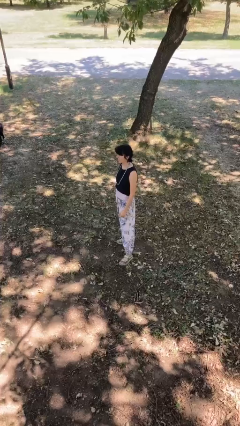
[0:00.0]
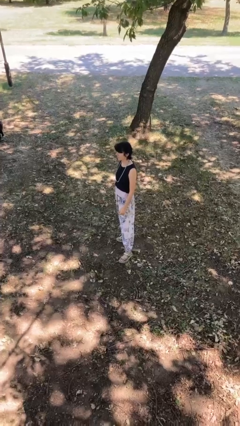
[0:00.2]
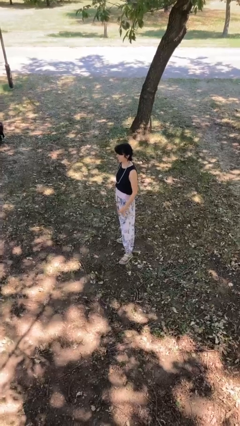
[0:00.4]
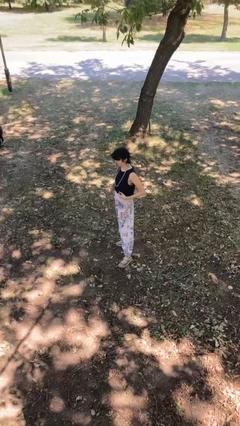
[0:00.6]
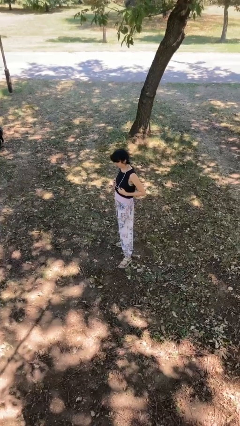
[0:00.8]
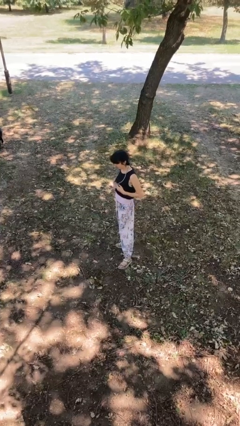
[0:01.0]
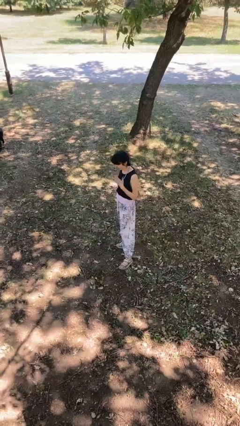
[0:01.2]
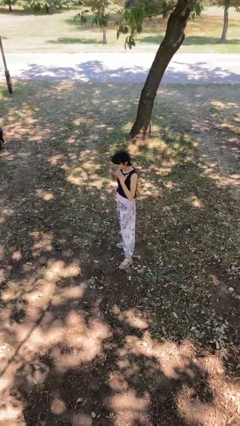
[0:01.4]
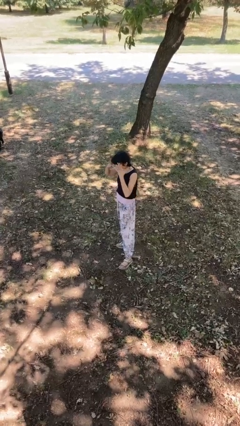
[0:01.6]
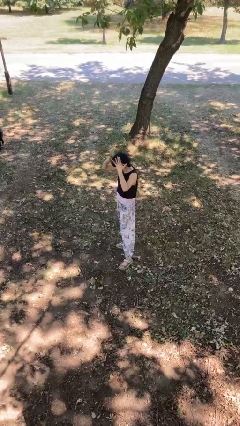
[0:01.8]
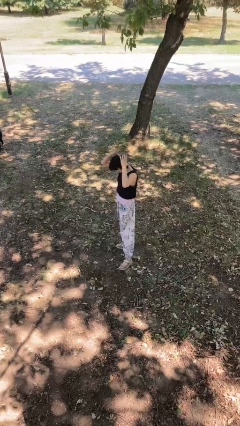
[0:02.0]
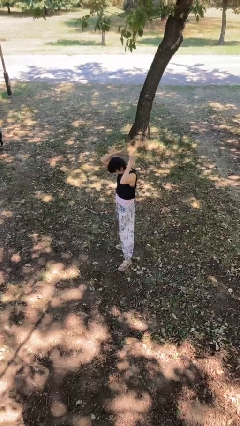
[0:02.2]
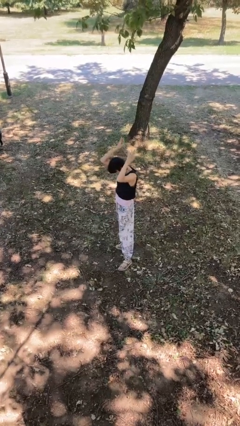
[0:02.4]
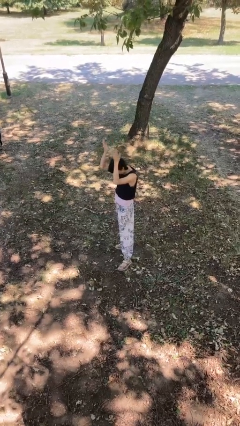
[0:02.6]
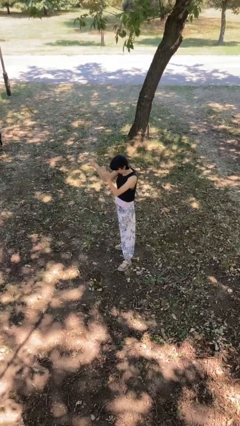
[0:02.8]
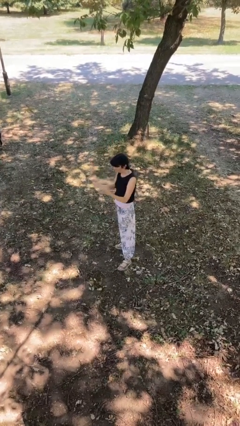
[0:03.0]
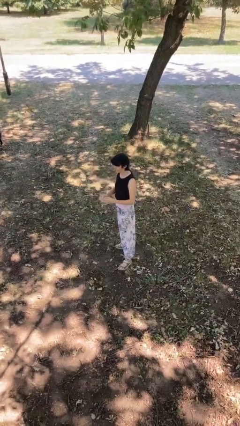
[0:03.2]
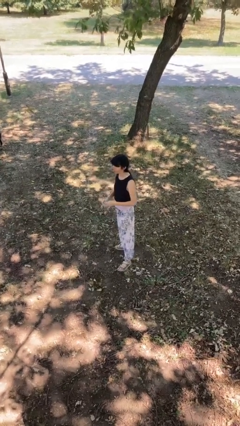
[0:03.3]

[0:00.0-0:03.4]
person takes off necklace

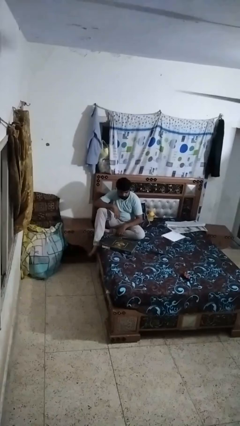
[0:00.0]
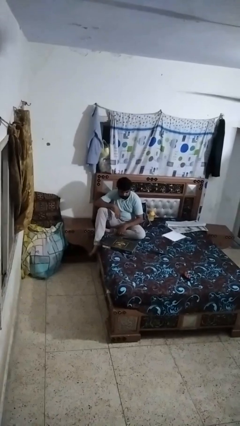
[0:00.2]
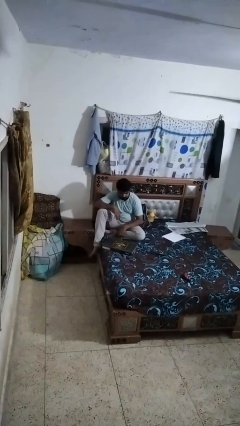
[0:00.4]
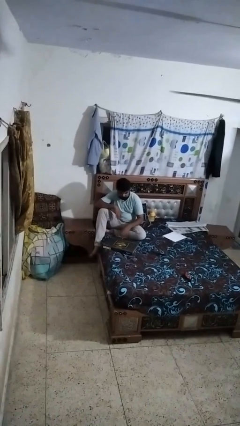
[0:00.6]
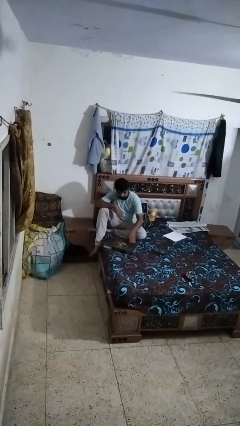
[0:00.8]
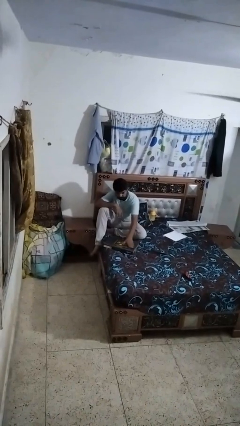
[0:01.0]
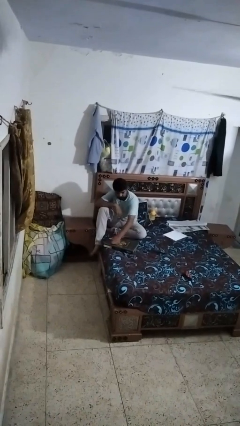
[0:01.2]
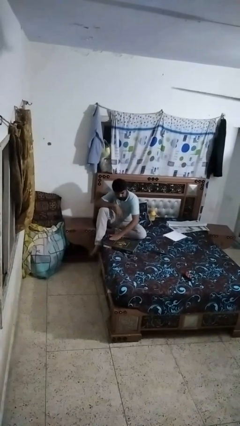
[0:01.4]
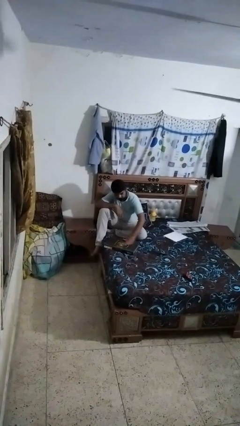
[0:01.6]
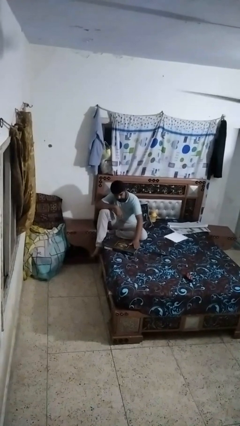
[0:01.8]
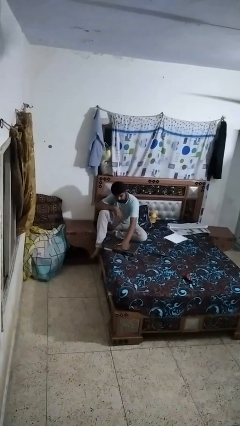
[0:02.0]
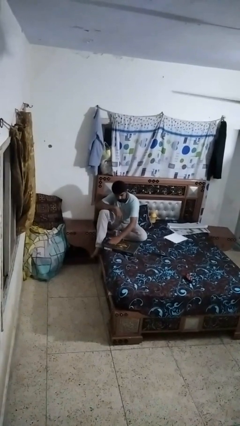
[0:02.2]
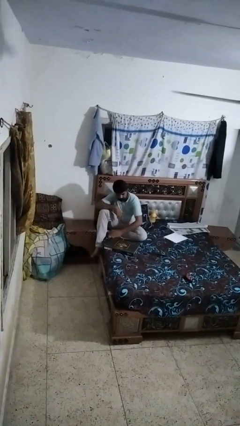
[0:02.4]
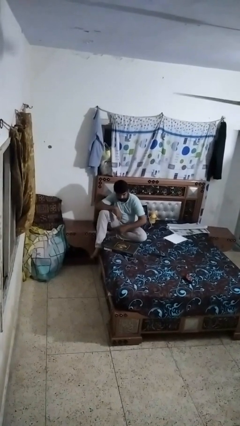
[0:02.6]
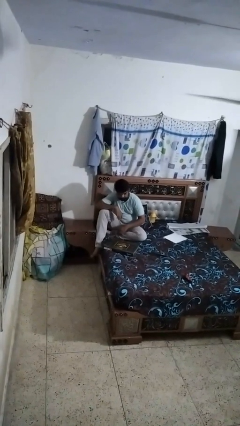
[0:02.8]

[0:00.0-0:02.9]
person waves hand over object

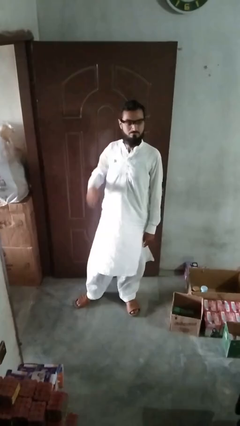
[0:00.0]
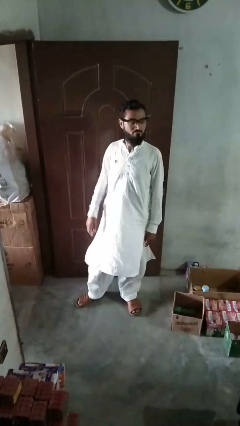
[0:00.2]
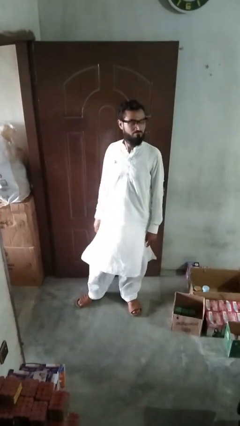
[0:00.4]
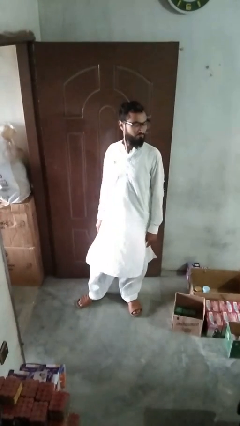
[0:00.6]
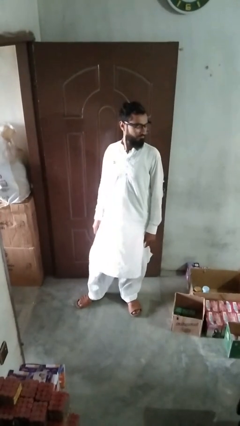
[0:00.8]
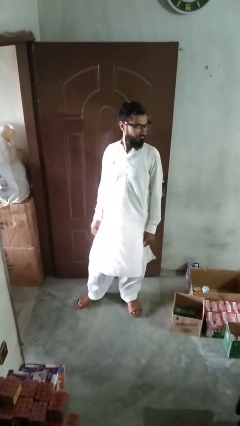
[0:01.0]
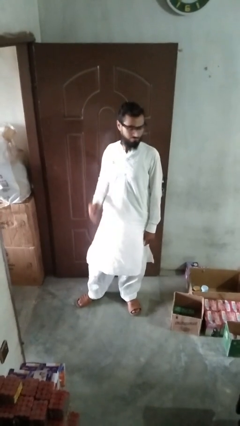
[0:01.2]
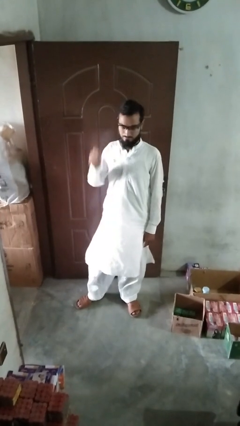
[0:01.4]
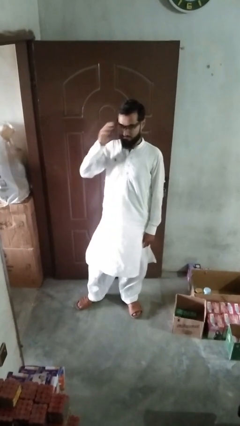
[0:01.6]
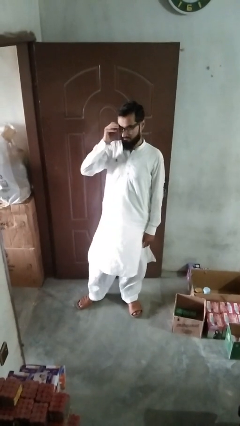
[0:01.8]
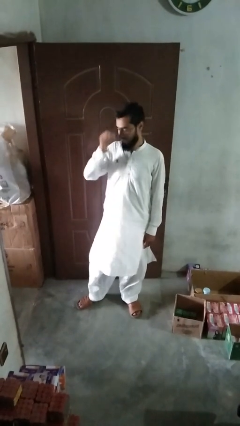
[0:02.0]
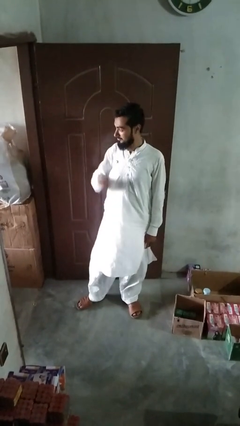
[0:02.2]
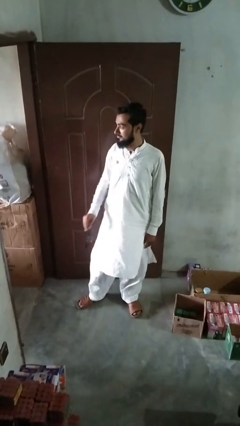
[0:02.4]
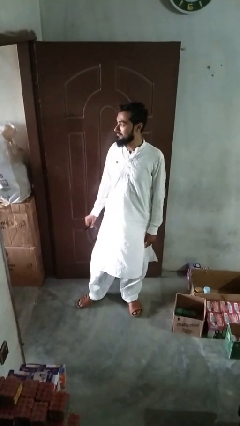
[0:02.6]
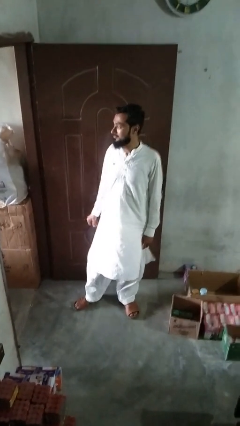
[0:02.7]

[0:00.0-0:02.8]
person takes off glasses

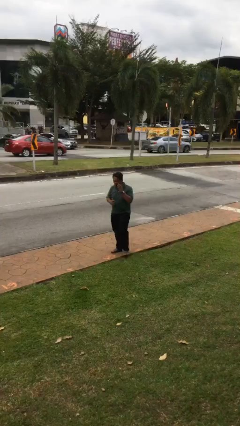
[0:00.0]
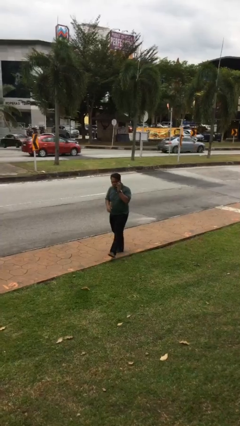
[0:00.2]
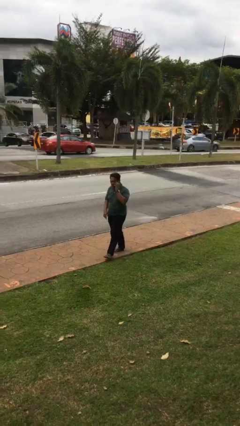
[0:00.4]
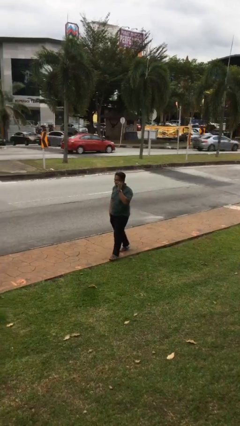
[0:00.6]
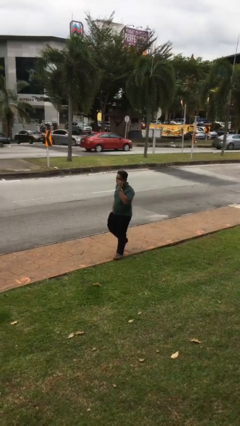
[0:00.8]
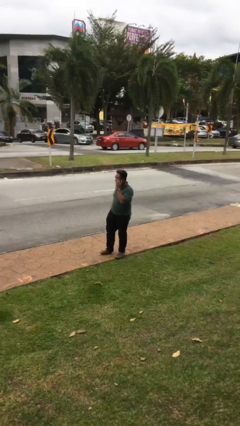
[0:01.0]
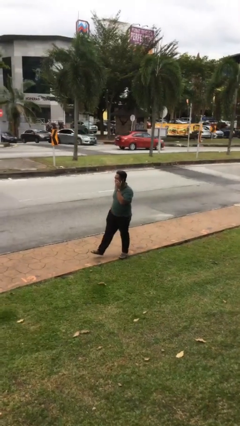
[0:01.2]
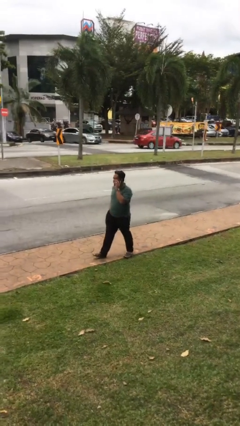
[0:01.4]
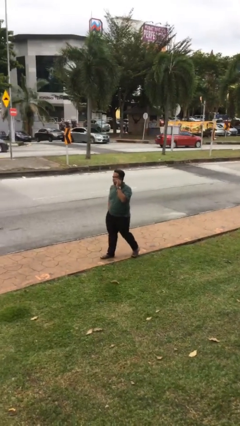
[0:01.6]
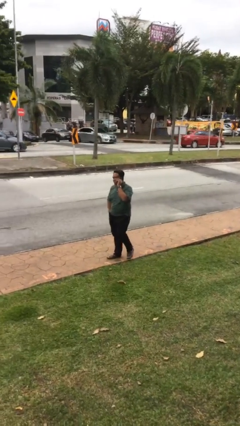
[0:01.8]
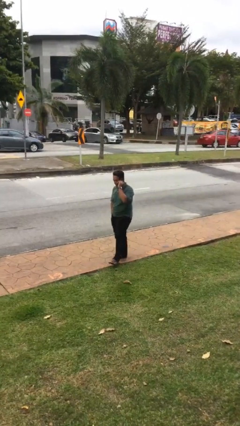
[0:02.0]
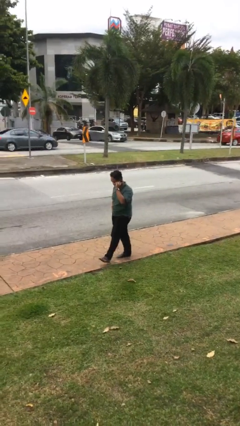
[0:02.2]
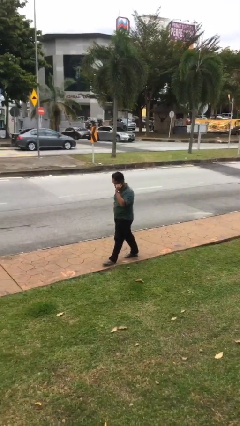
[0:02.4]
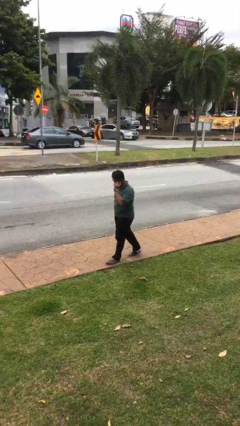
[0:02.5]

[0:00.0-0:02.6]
person talks on phone

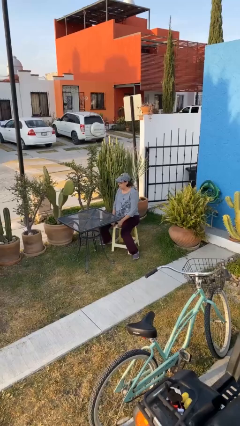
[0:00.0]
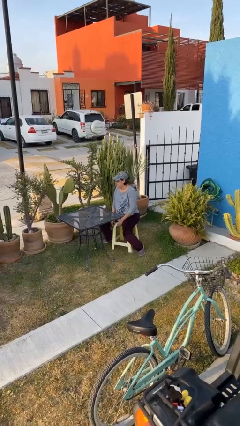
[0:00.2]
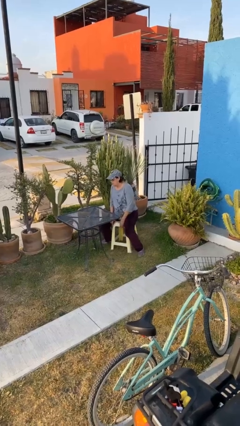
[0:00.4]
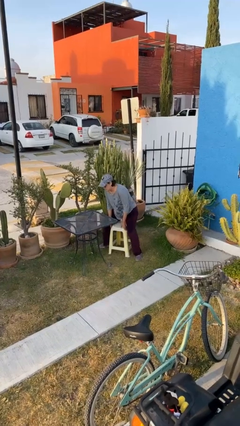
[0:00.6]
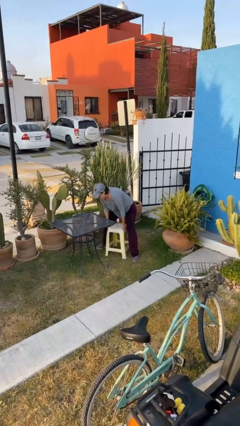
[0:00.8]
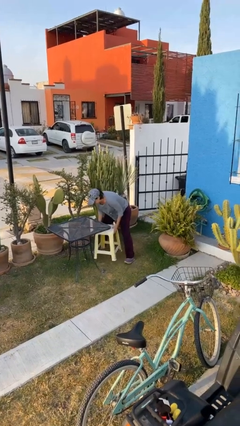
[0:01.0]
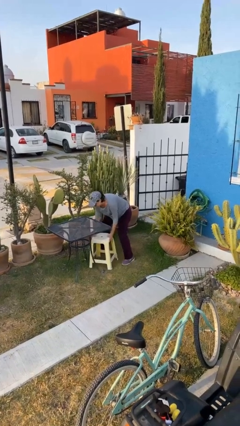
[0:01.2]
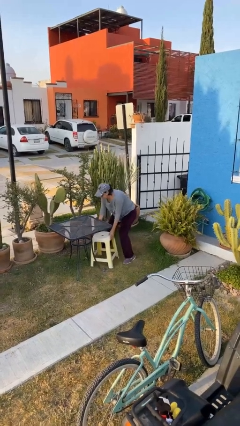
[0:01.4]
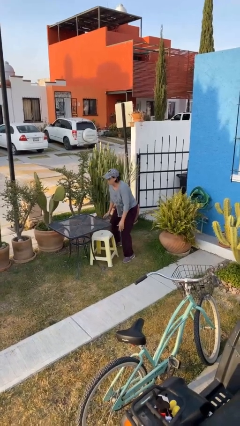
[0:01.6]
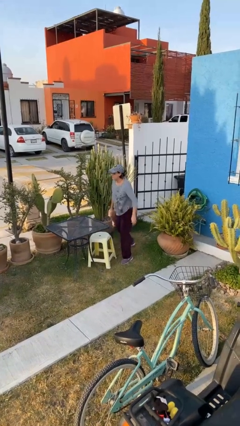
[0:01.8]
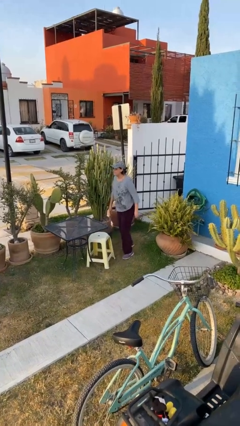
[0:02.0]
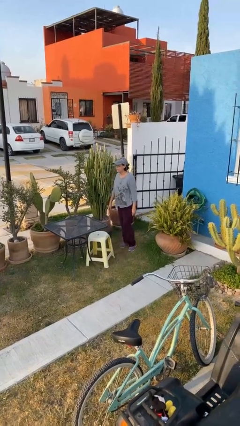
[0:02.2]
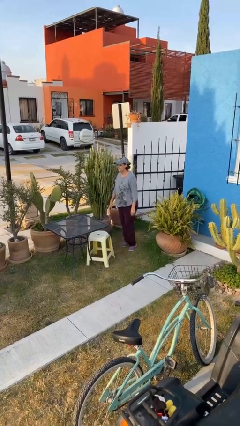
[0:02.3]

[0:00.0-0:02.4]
person stands up

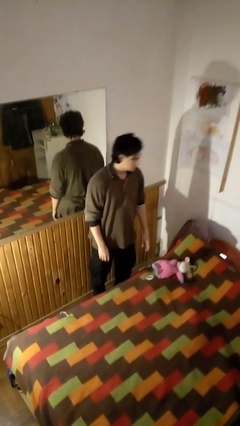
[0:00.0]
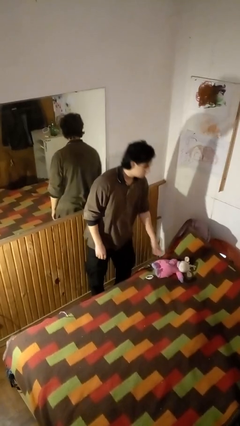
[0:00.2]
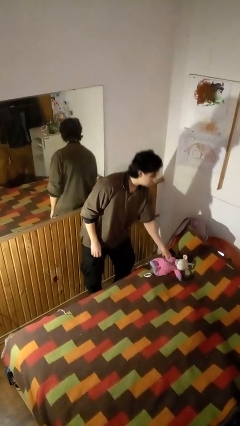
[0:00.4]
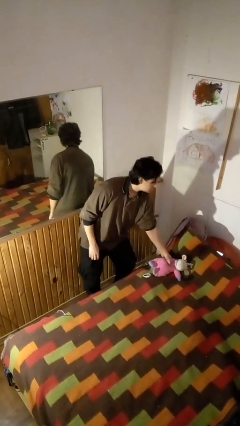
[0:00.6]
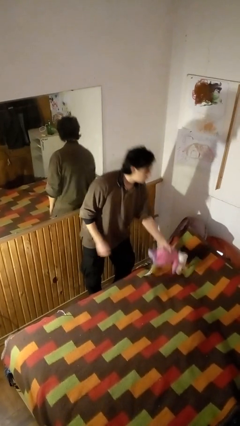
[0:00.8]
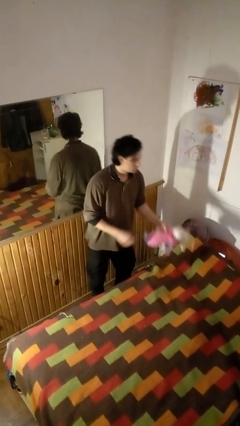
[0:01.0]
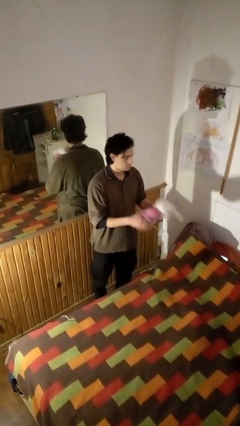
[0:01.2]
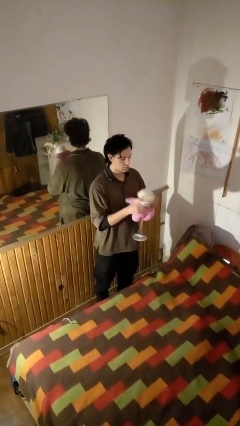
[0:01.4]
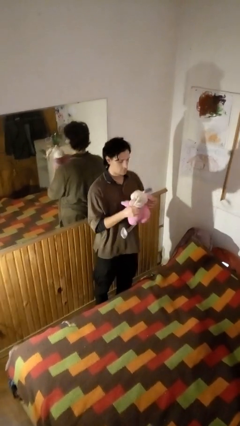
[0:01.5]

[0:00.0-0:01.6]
person picks up object from bed

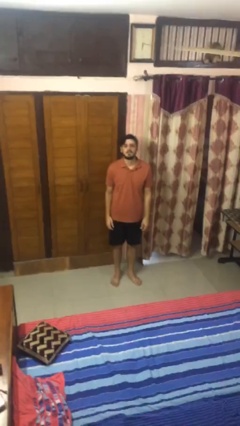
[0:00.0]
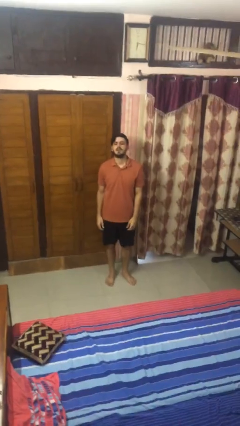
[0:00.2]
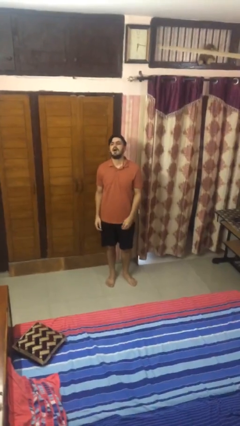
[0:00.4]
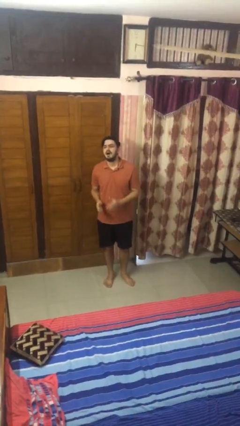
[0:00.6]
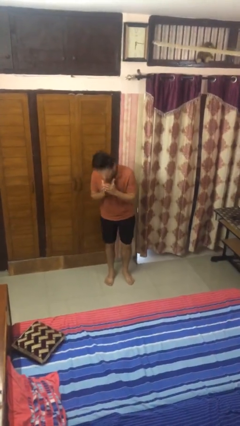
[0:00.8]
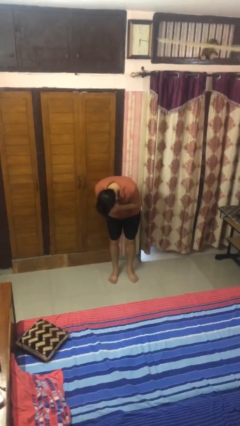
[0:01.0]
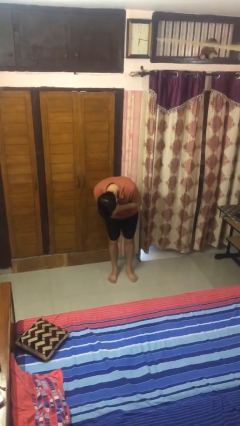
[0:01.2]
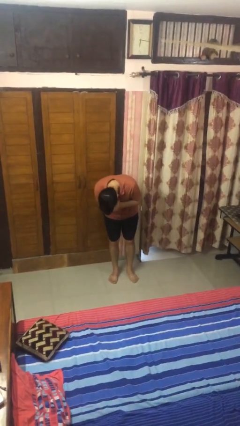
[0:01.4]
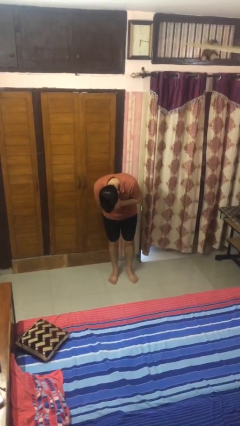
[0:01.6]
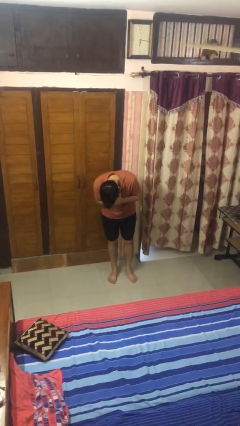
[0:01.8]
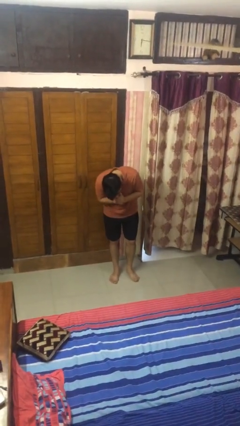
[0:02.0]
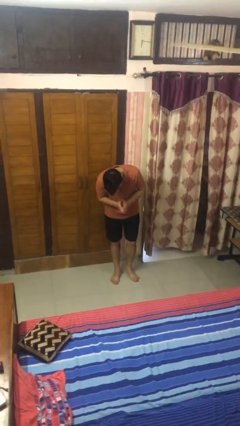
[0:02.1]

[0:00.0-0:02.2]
person sneezes into hand
